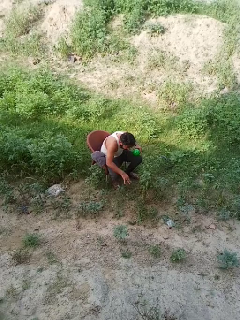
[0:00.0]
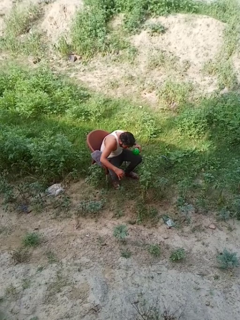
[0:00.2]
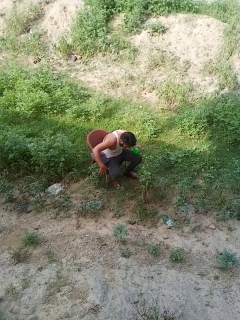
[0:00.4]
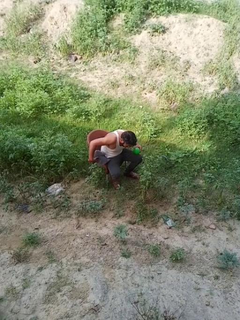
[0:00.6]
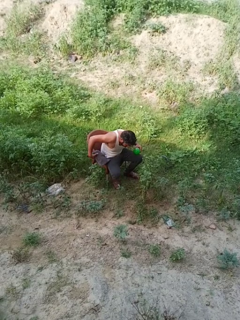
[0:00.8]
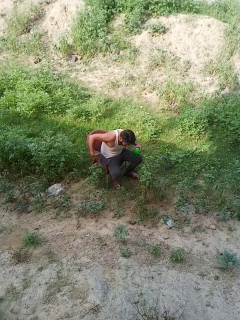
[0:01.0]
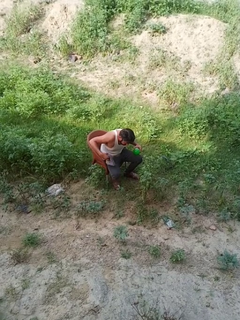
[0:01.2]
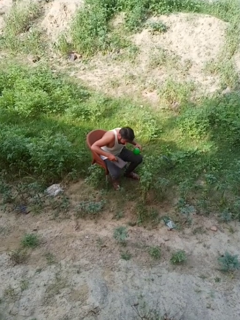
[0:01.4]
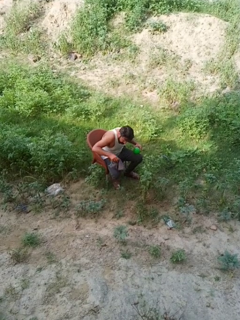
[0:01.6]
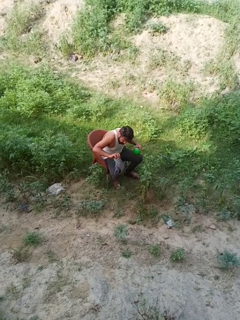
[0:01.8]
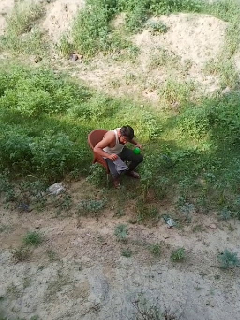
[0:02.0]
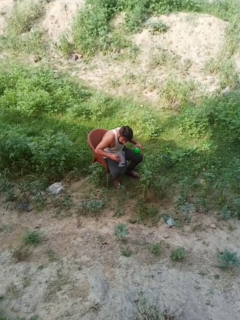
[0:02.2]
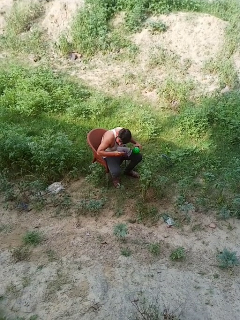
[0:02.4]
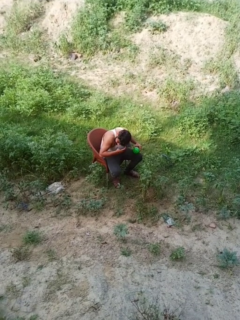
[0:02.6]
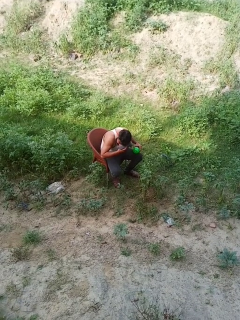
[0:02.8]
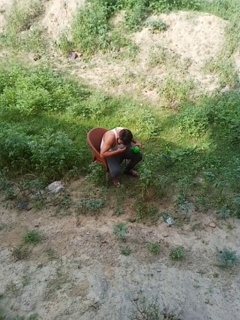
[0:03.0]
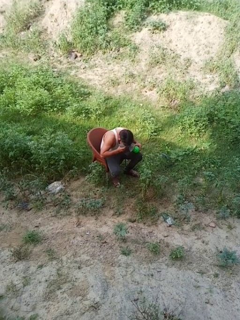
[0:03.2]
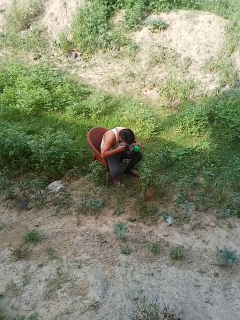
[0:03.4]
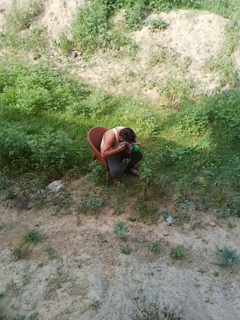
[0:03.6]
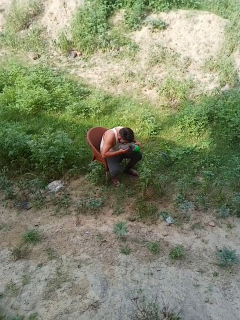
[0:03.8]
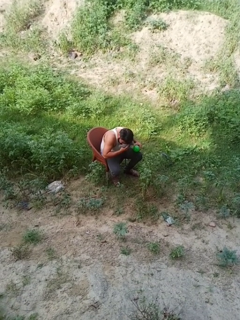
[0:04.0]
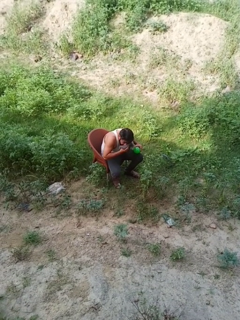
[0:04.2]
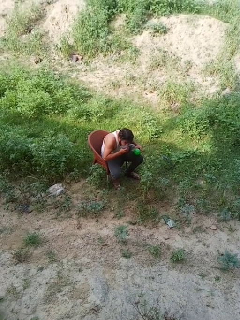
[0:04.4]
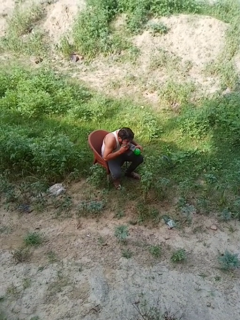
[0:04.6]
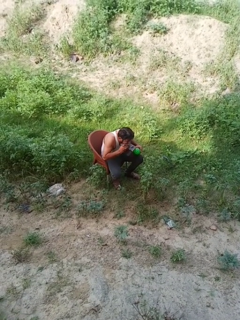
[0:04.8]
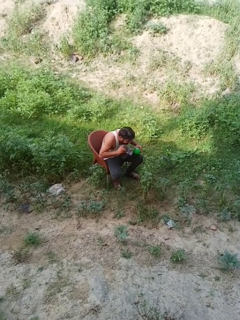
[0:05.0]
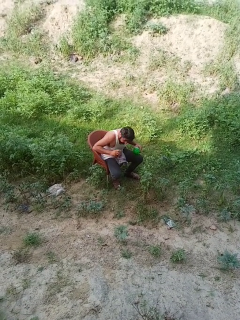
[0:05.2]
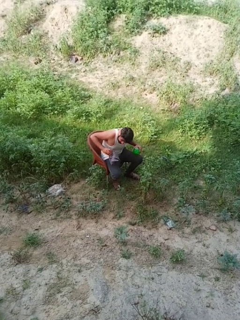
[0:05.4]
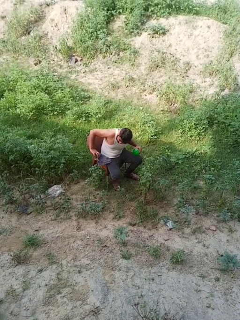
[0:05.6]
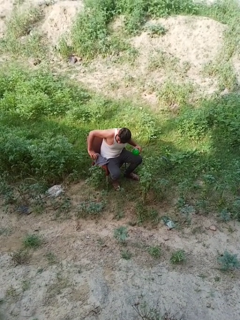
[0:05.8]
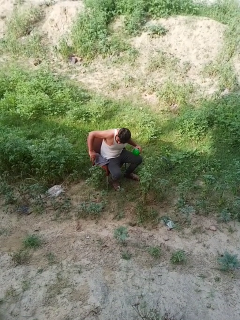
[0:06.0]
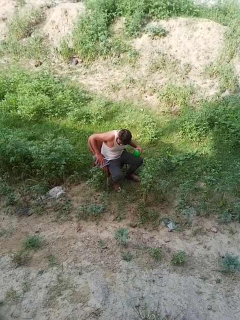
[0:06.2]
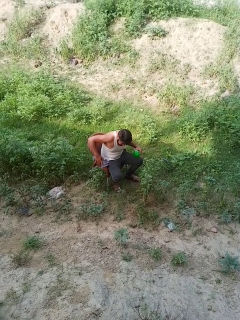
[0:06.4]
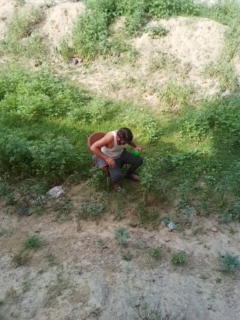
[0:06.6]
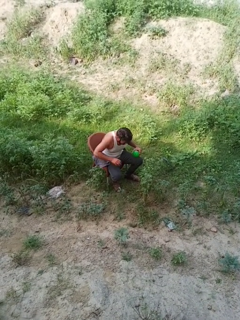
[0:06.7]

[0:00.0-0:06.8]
person dries face with towel

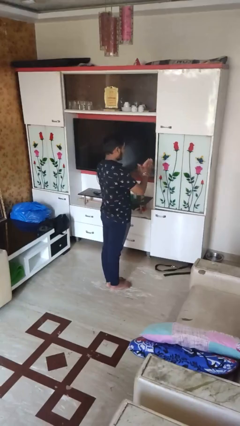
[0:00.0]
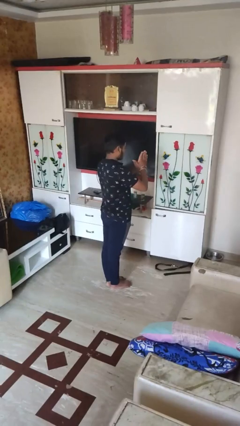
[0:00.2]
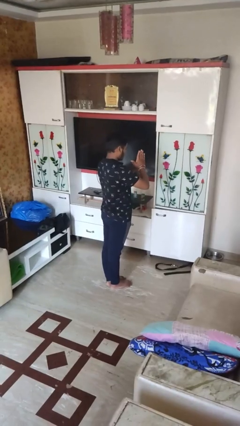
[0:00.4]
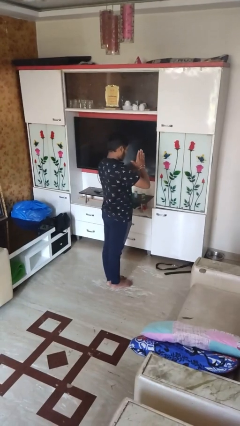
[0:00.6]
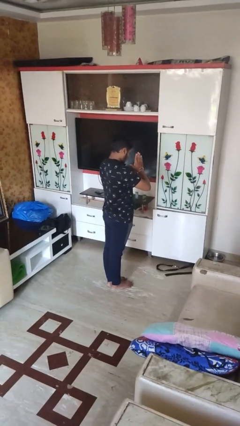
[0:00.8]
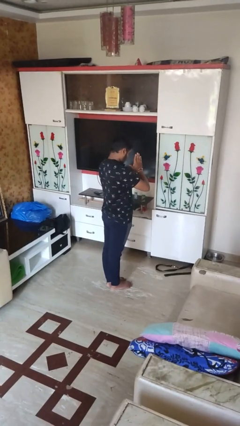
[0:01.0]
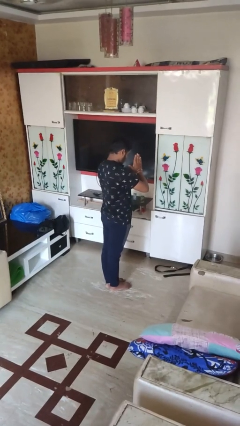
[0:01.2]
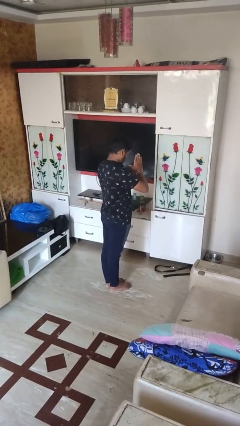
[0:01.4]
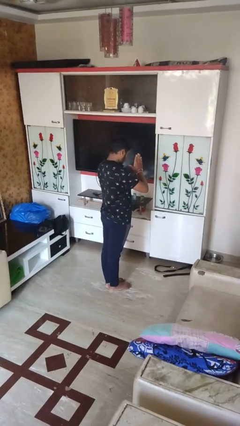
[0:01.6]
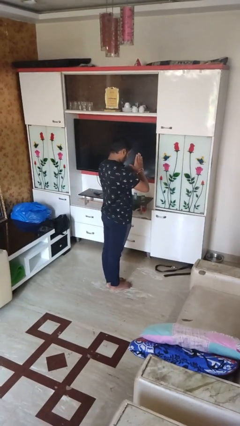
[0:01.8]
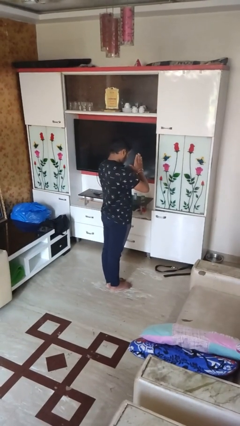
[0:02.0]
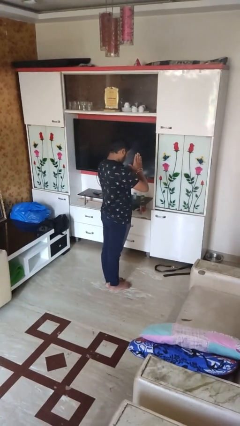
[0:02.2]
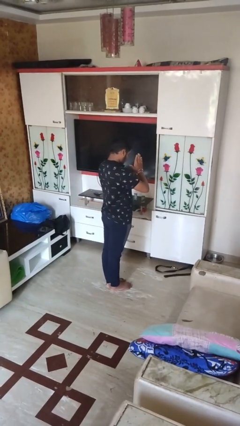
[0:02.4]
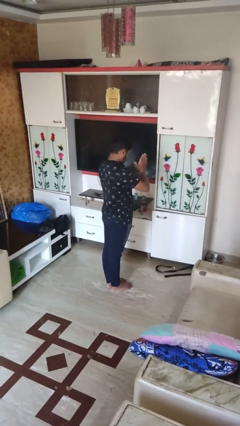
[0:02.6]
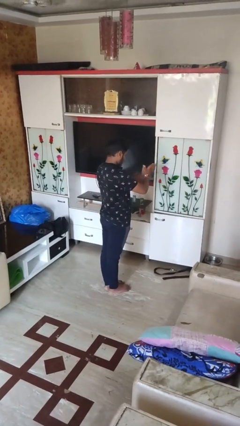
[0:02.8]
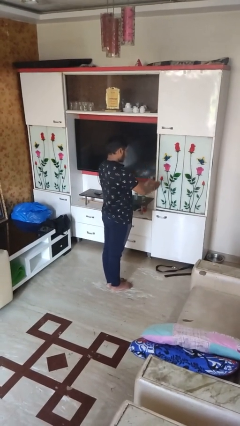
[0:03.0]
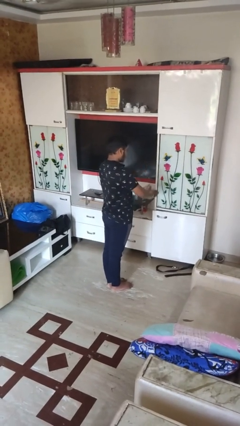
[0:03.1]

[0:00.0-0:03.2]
person prays

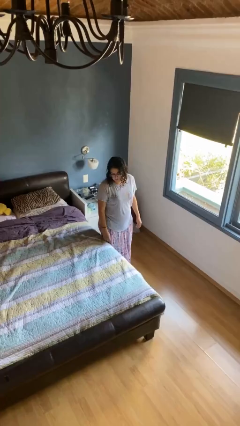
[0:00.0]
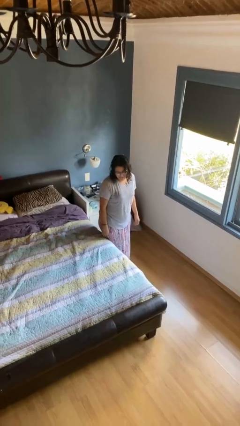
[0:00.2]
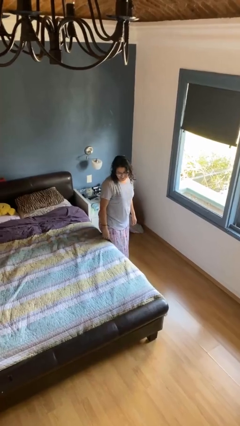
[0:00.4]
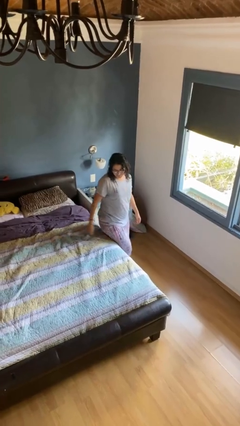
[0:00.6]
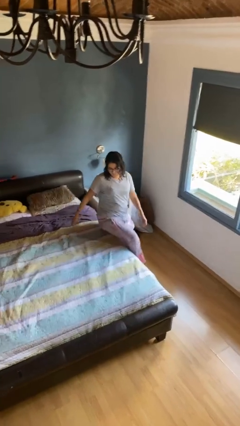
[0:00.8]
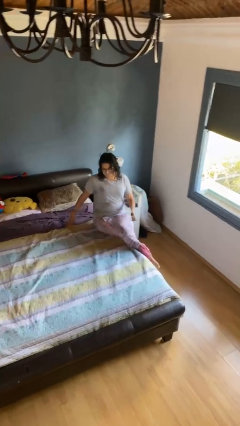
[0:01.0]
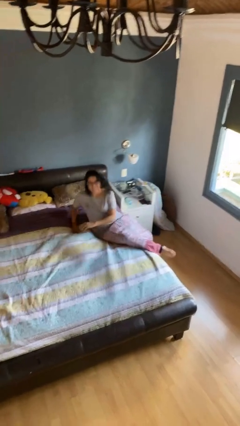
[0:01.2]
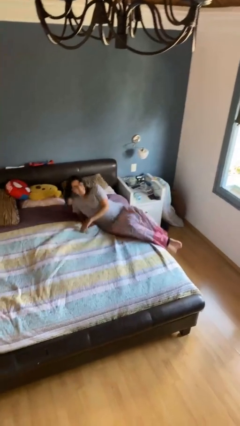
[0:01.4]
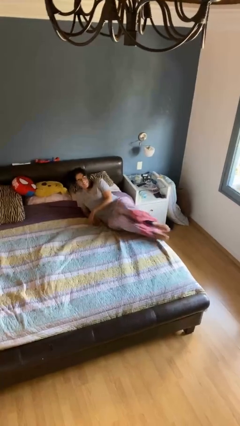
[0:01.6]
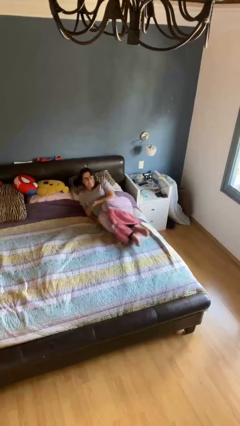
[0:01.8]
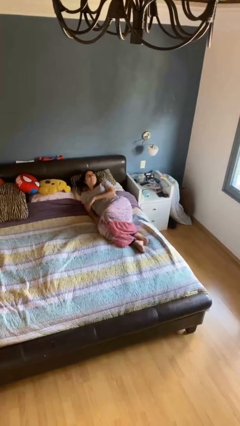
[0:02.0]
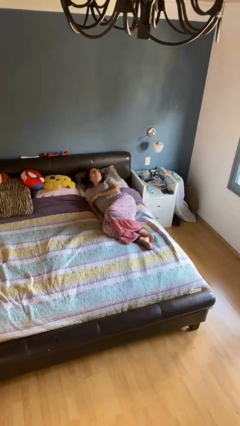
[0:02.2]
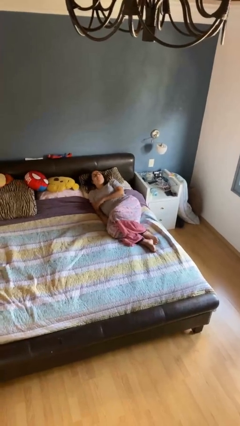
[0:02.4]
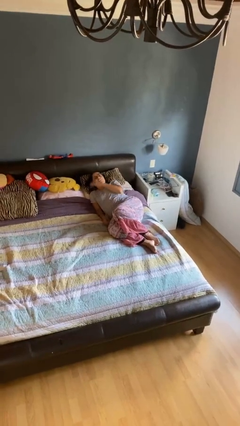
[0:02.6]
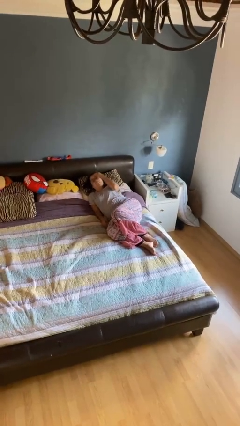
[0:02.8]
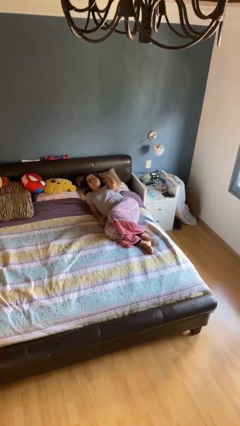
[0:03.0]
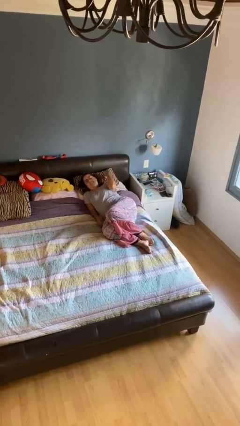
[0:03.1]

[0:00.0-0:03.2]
person lies down on bed

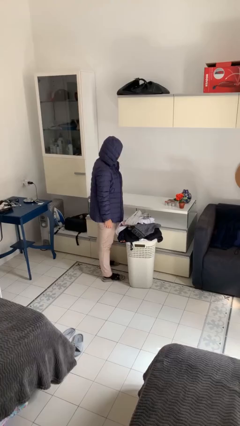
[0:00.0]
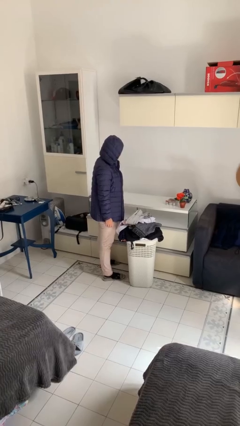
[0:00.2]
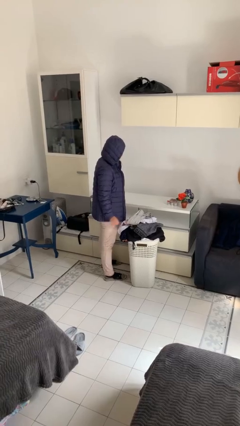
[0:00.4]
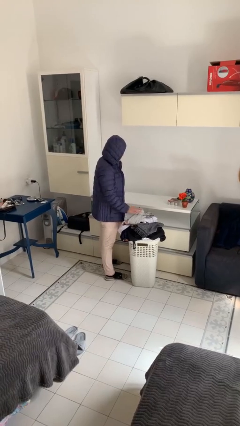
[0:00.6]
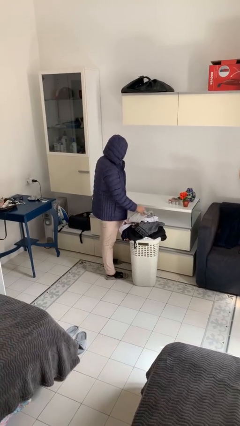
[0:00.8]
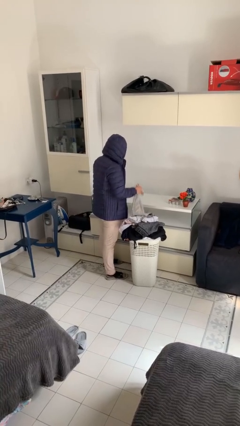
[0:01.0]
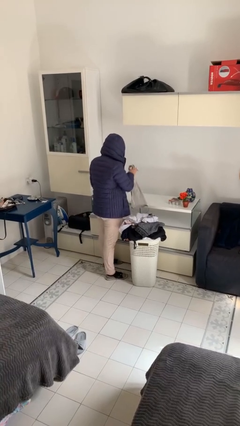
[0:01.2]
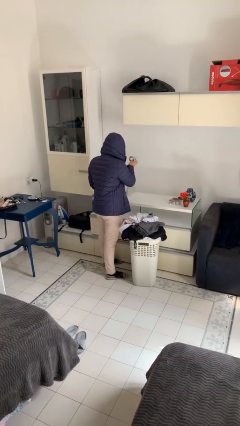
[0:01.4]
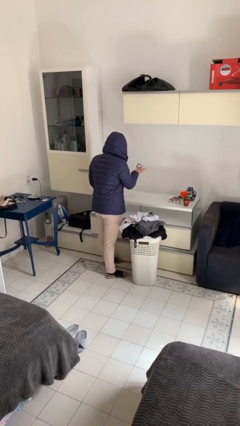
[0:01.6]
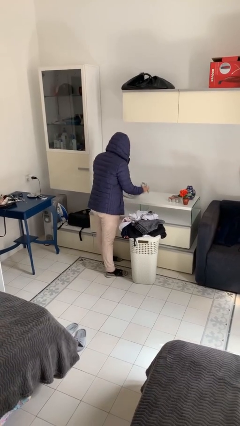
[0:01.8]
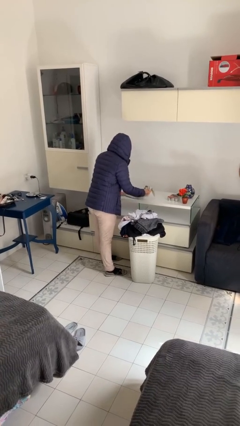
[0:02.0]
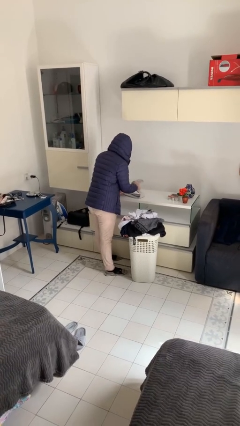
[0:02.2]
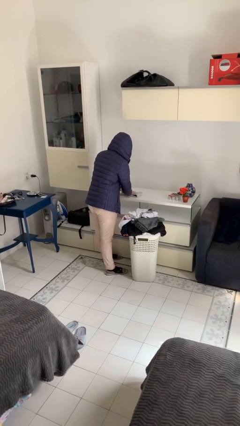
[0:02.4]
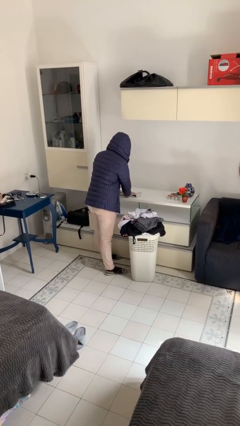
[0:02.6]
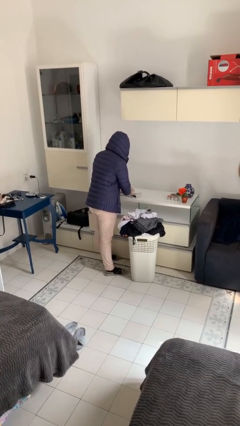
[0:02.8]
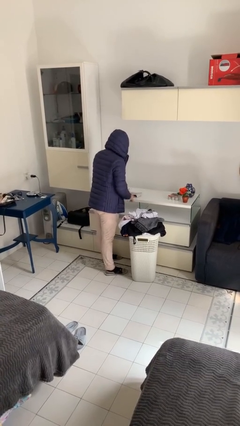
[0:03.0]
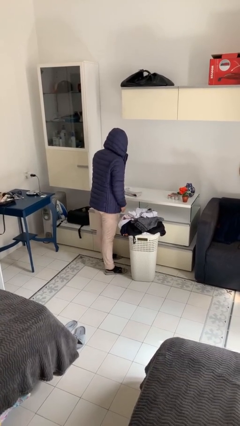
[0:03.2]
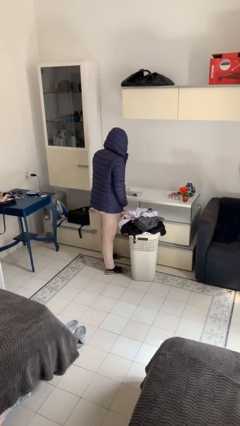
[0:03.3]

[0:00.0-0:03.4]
person folds shirt

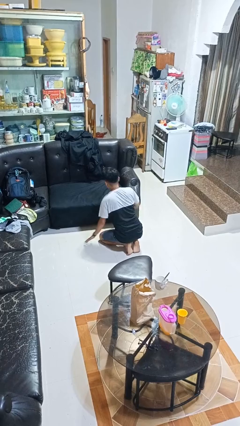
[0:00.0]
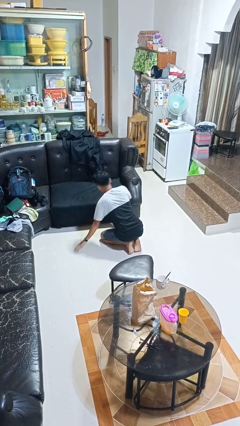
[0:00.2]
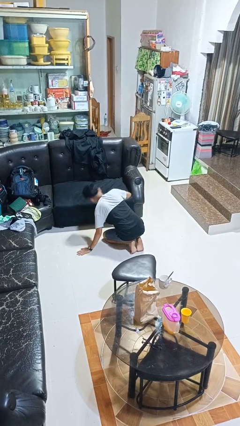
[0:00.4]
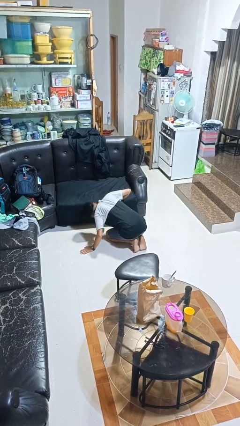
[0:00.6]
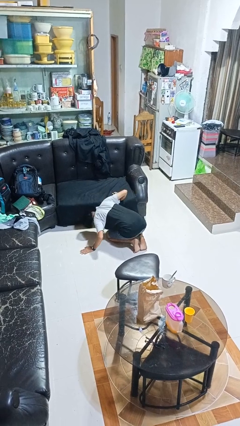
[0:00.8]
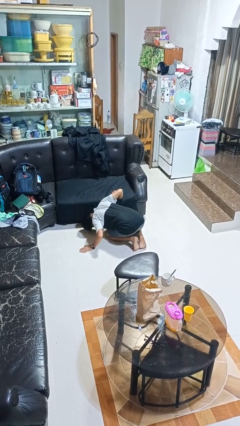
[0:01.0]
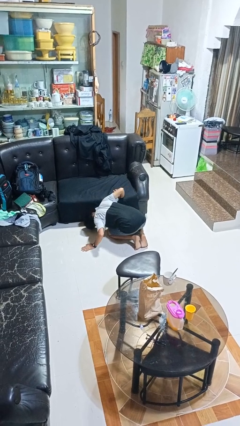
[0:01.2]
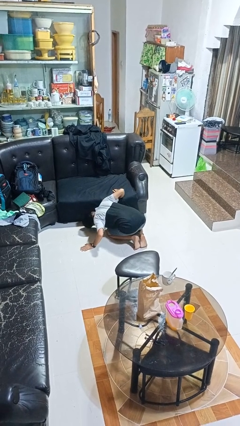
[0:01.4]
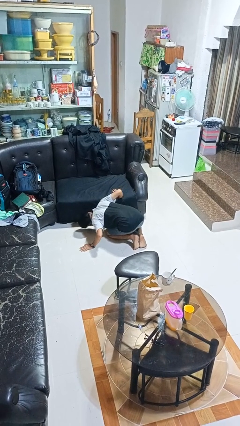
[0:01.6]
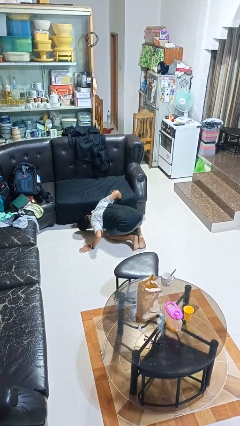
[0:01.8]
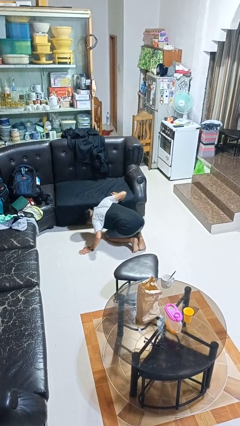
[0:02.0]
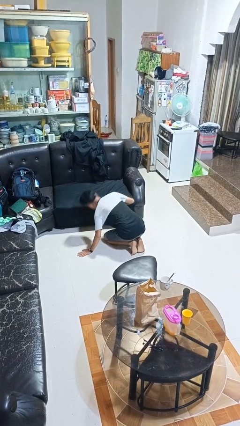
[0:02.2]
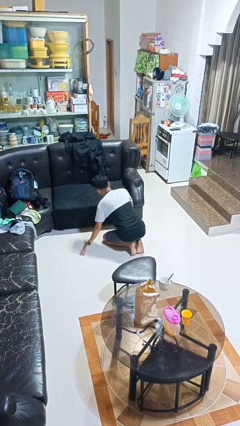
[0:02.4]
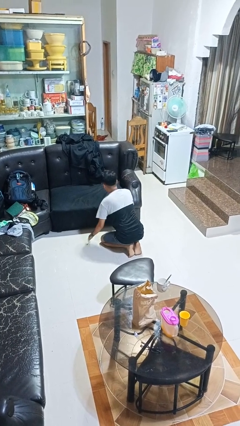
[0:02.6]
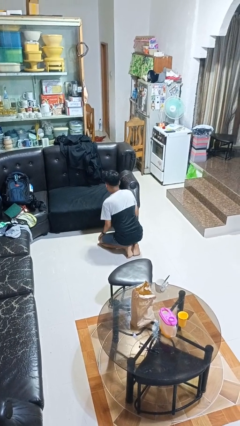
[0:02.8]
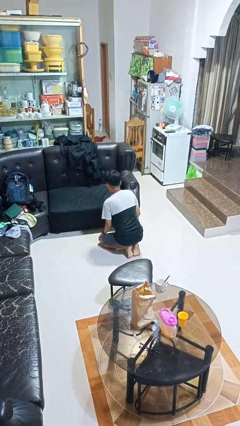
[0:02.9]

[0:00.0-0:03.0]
person searches under couch
